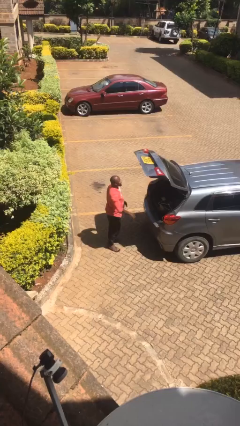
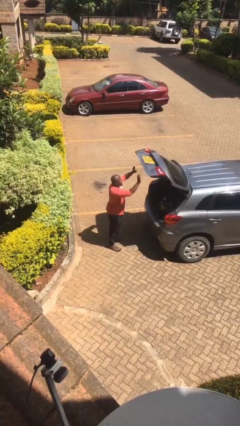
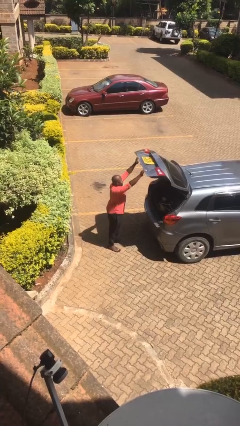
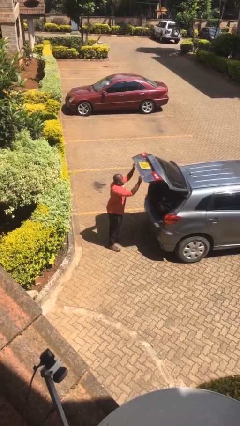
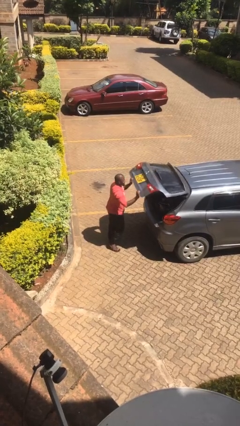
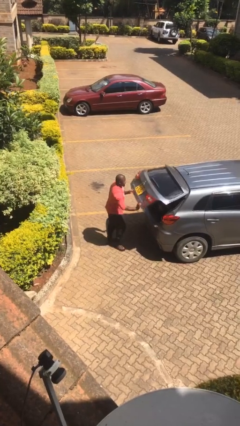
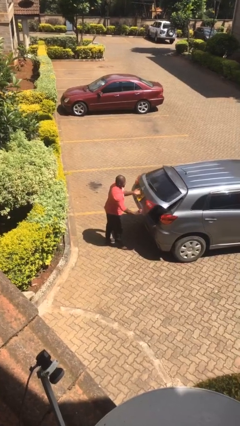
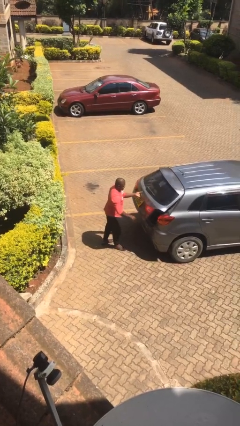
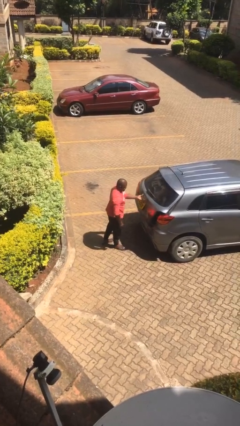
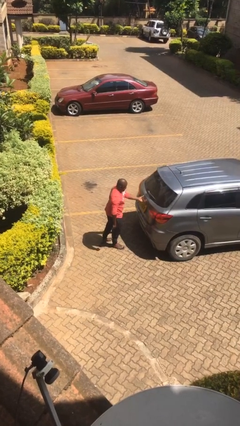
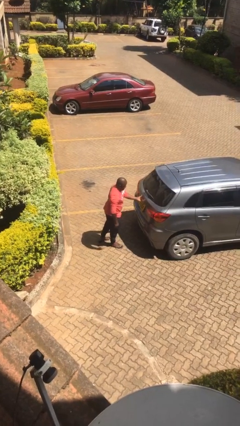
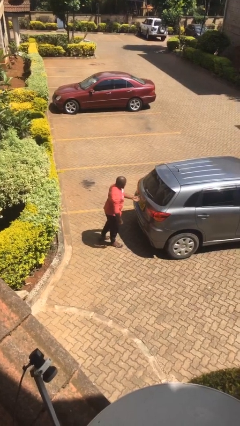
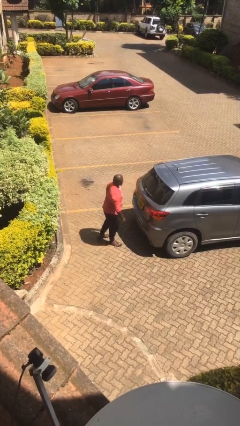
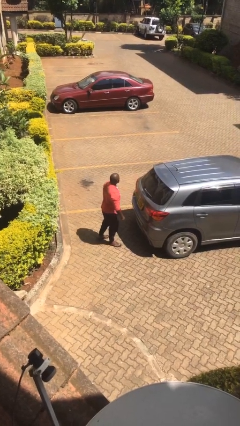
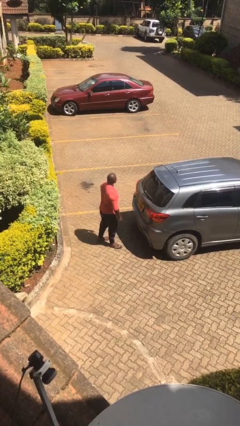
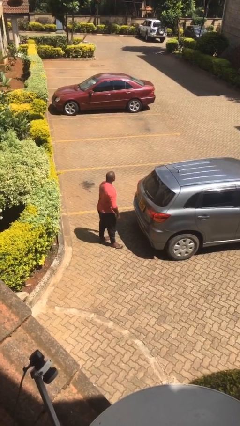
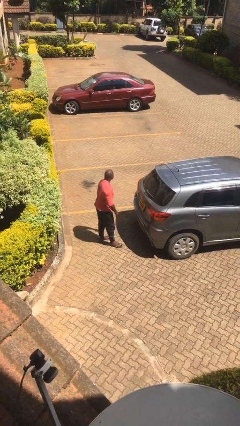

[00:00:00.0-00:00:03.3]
person closes car trunk

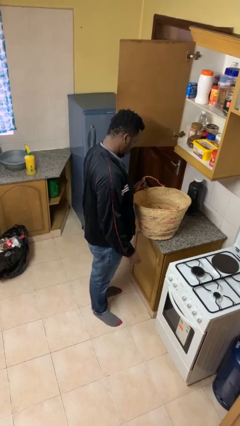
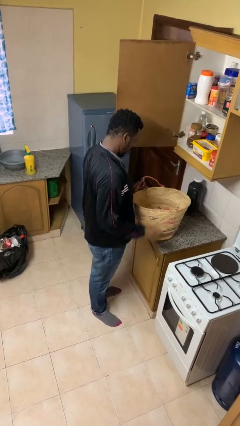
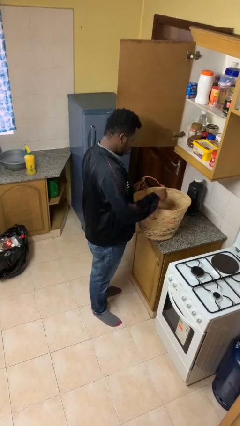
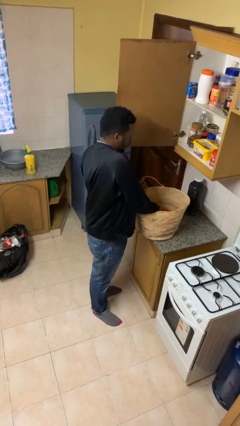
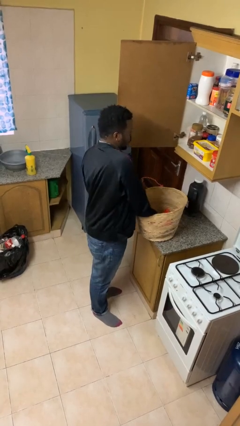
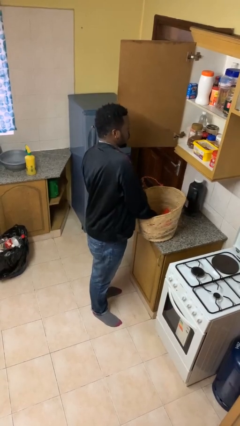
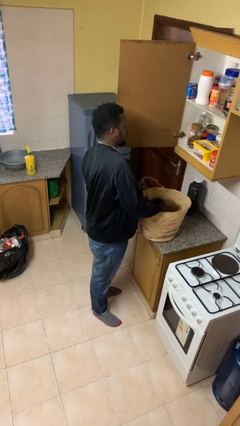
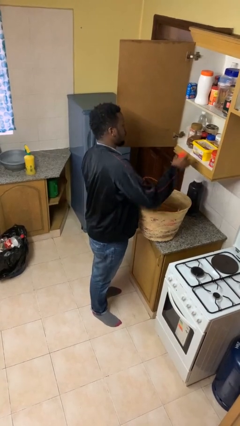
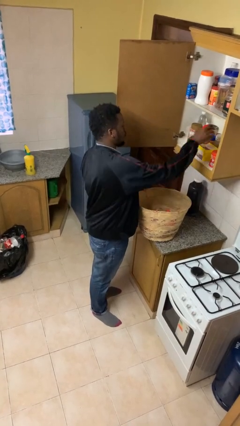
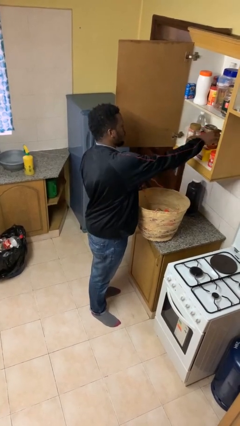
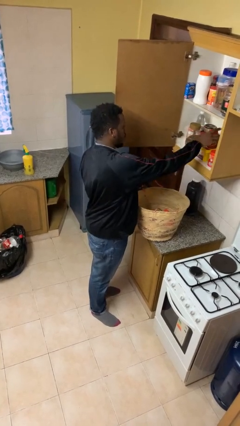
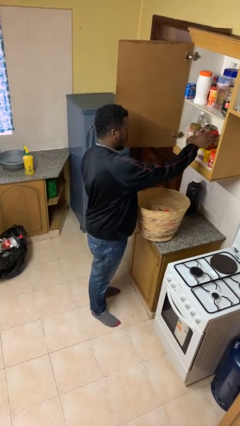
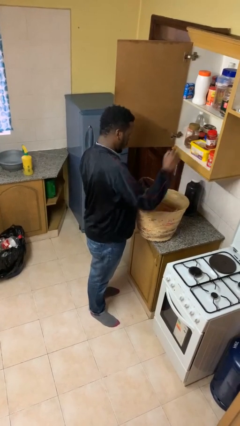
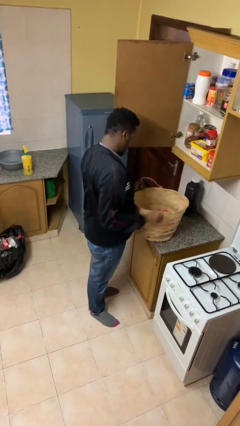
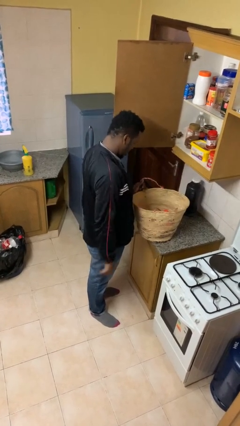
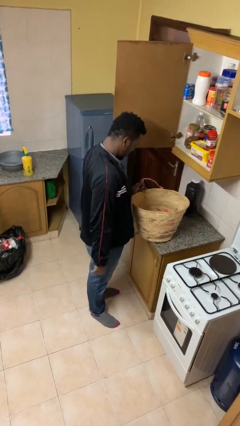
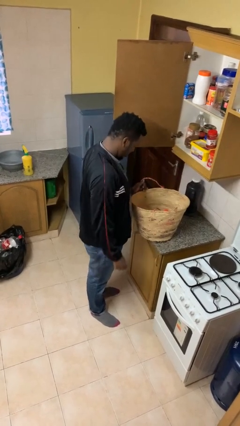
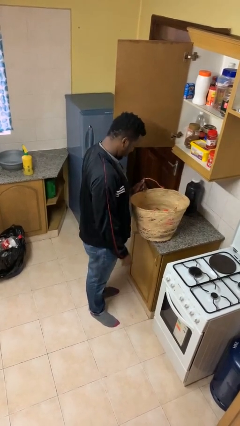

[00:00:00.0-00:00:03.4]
person loads groceries into cabinet

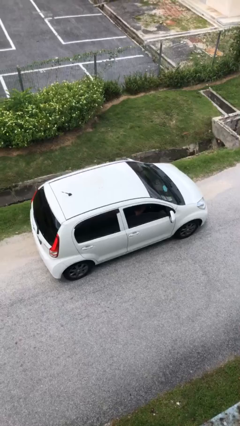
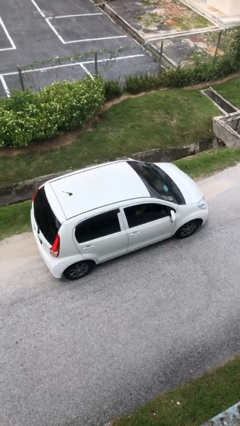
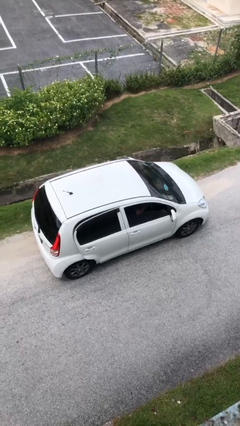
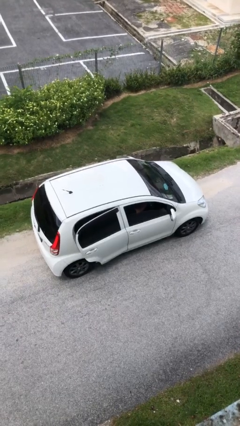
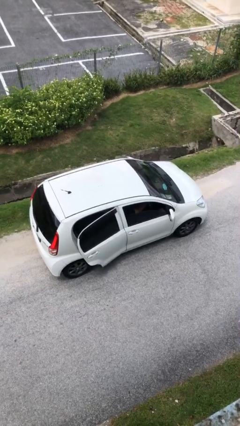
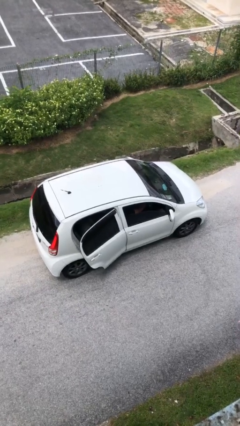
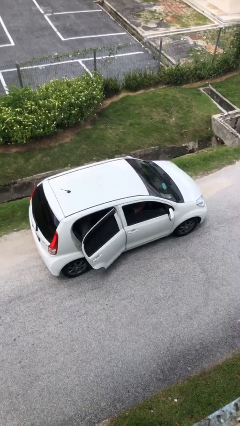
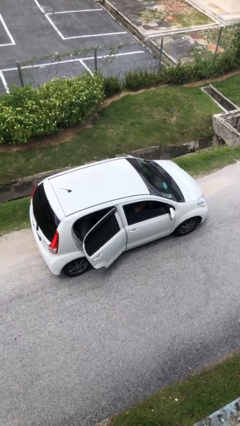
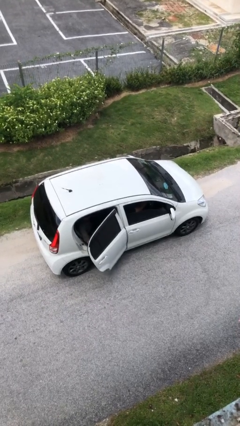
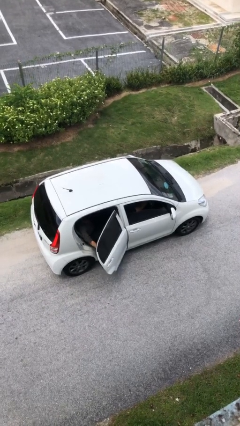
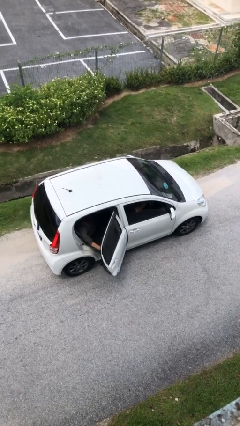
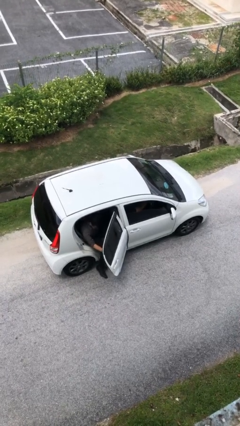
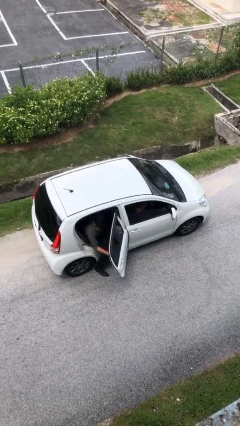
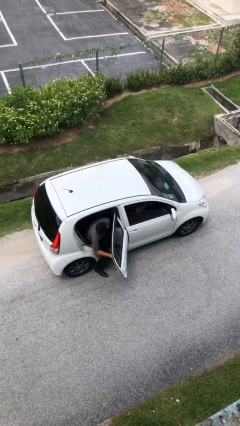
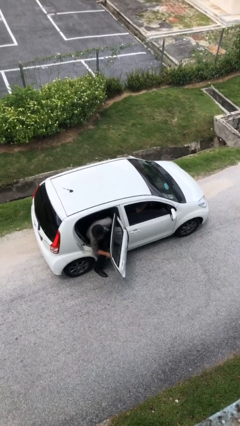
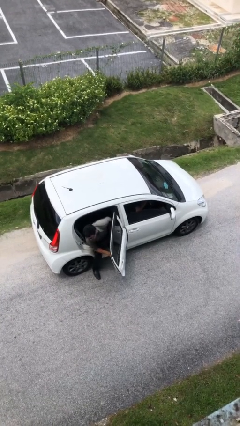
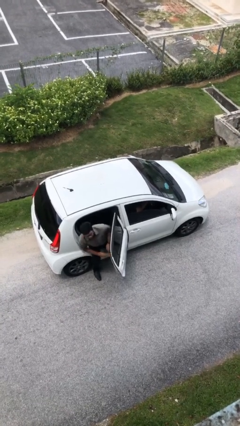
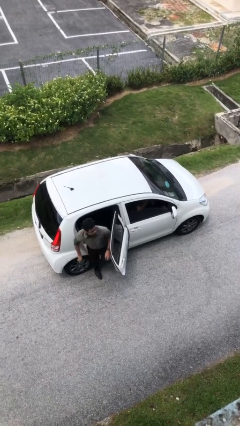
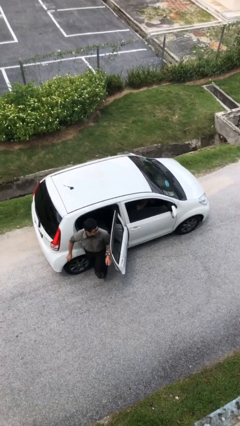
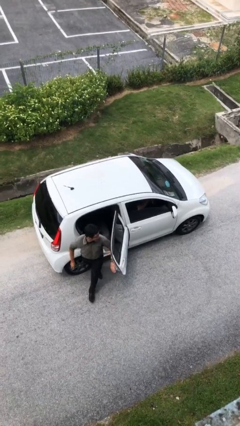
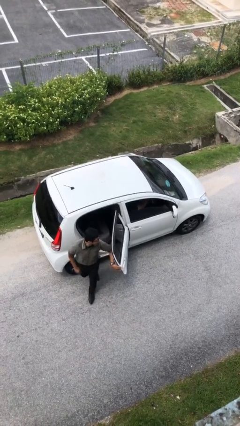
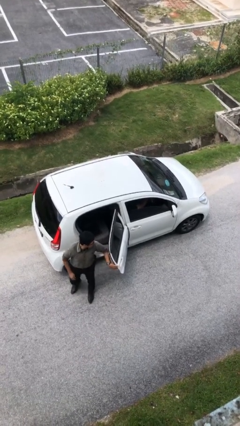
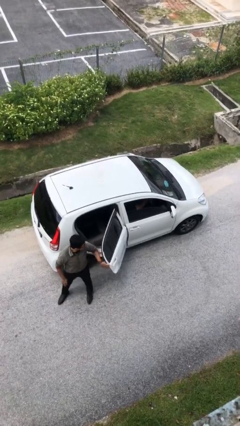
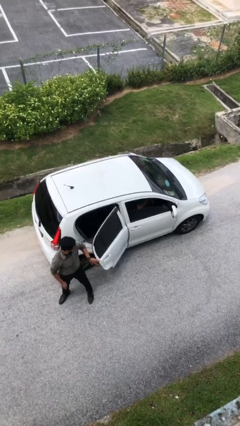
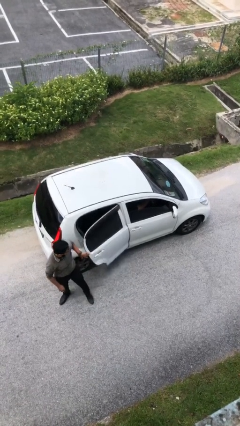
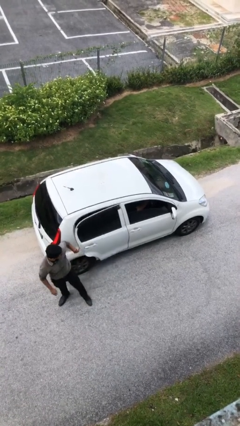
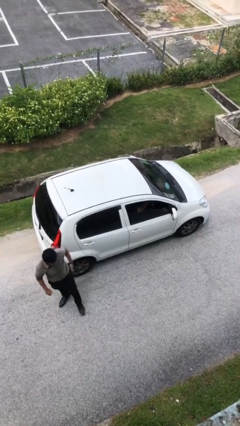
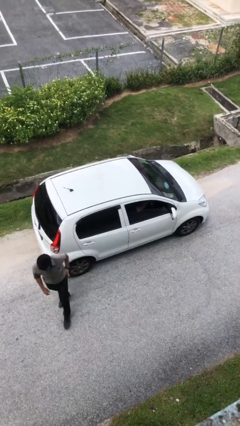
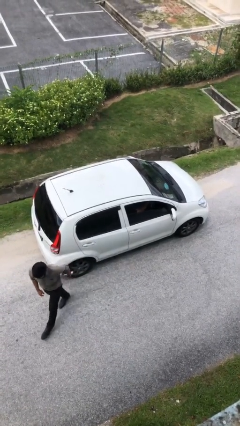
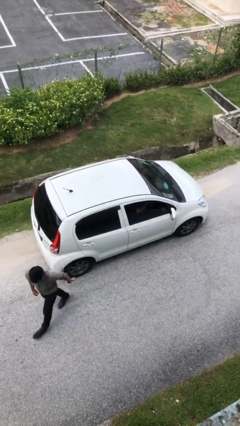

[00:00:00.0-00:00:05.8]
car drops off person

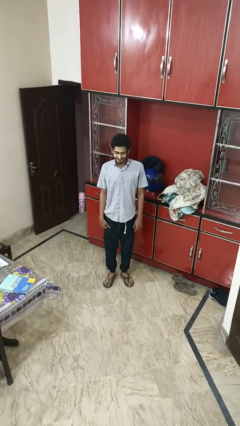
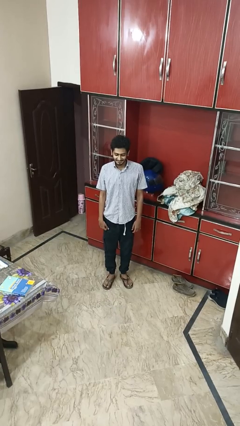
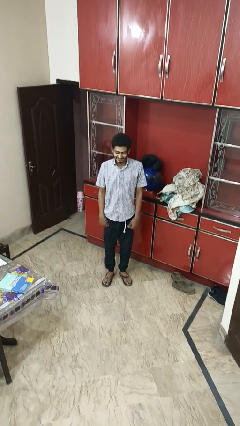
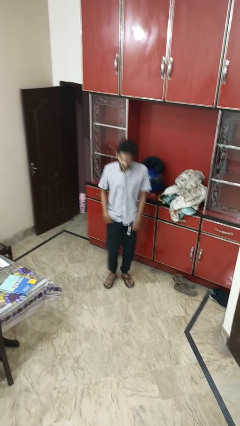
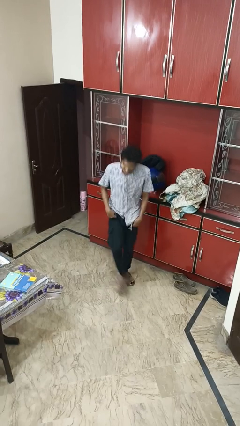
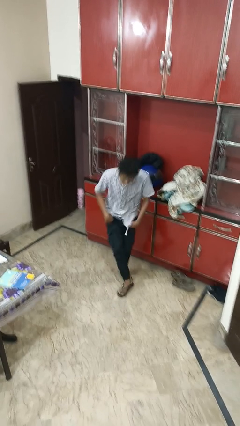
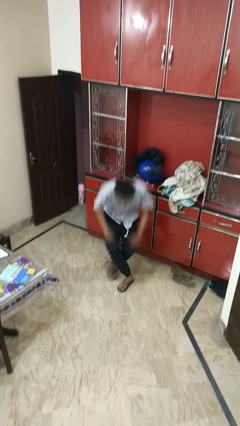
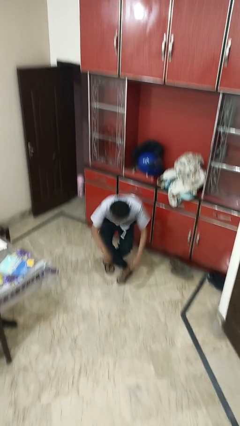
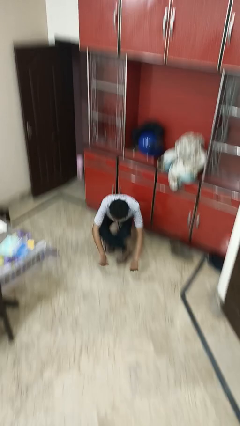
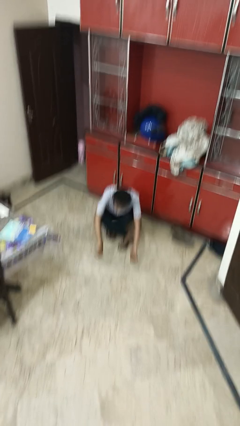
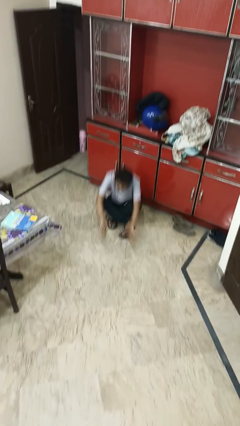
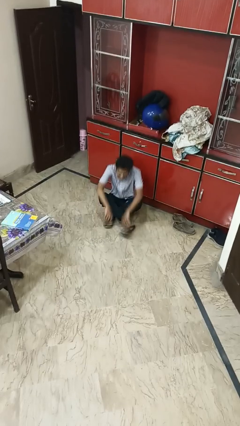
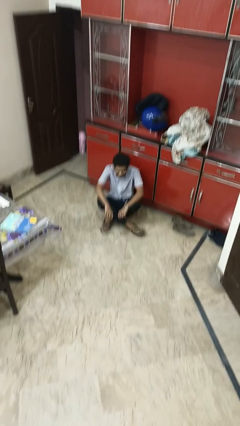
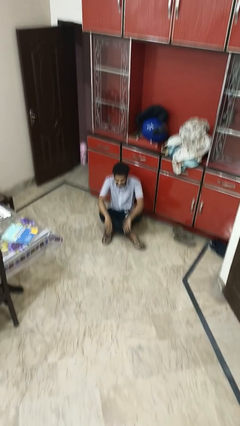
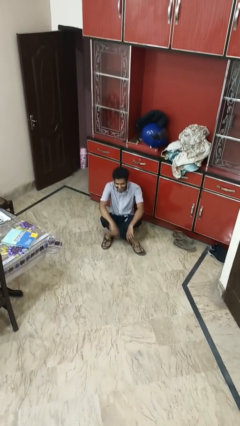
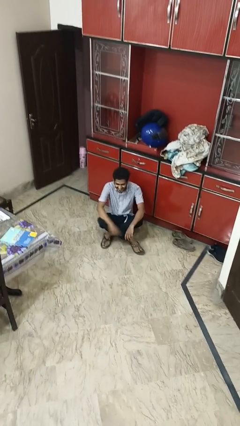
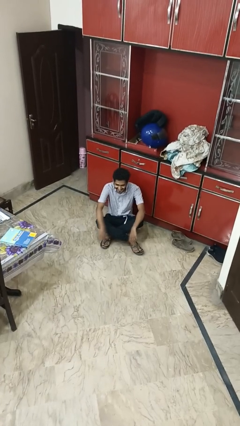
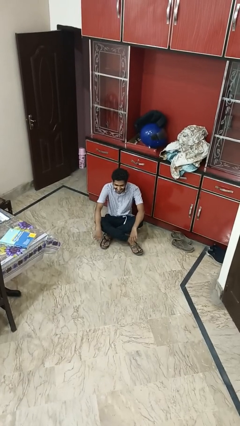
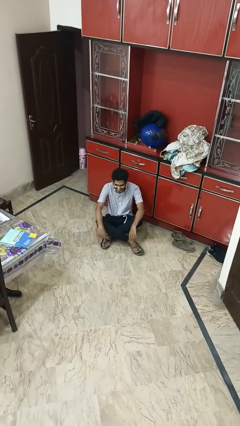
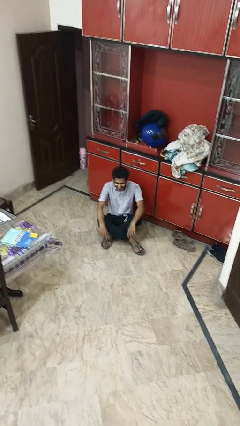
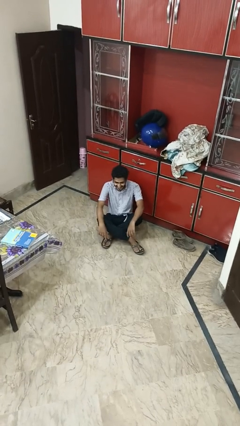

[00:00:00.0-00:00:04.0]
person sits crisscross

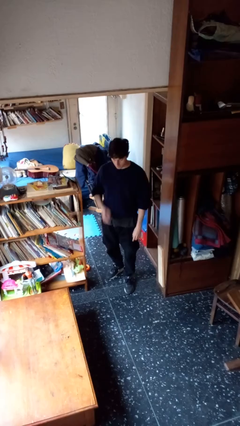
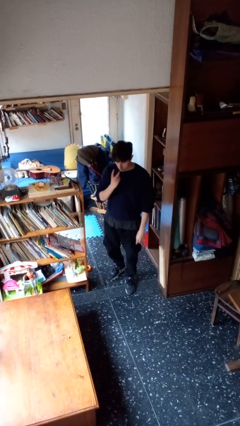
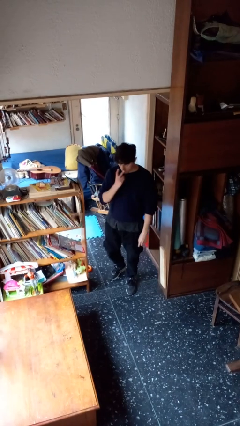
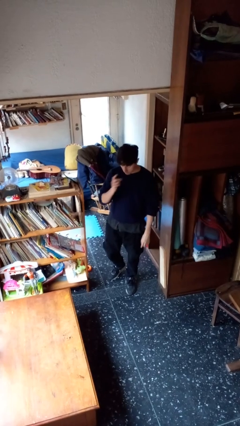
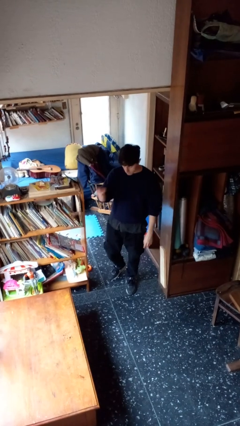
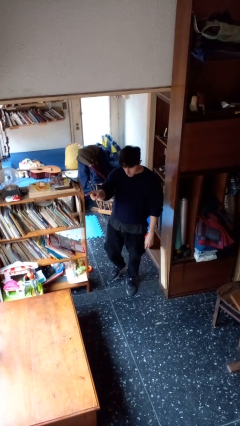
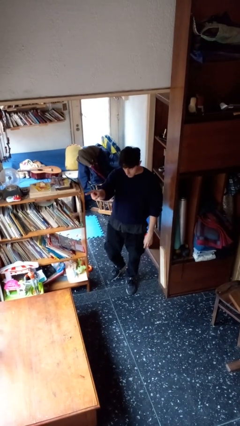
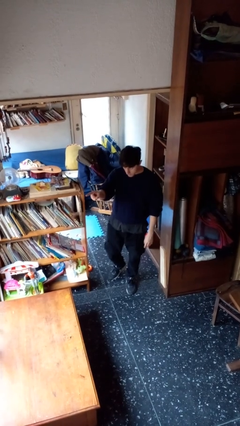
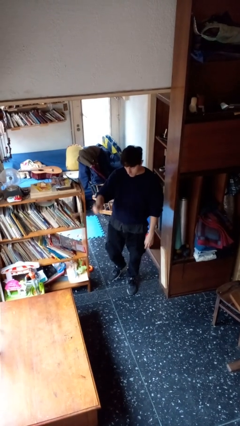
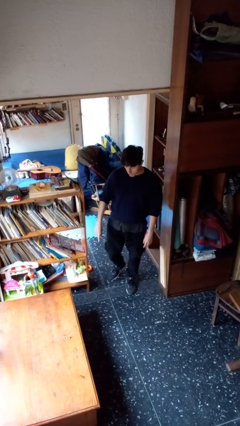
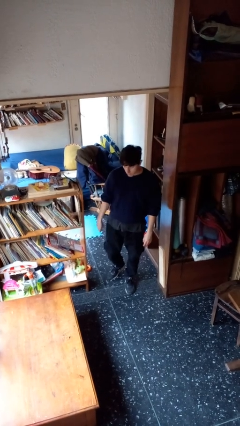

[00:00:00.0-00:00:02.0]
person gestures watch closely
